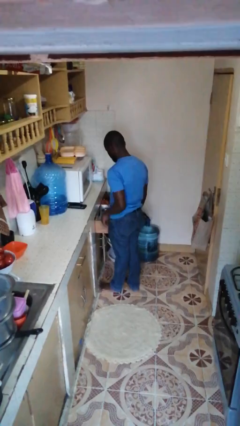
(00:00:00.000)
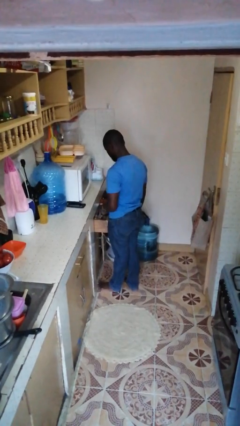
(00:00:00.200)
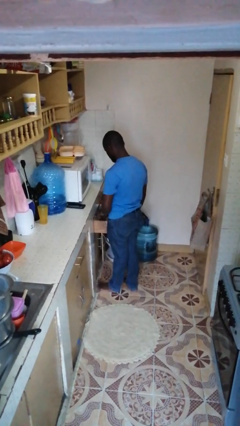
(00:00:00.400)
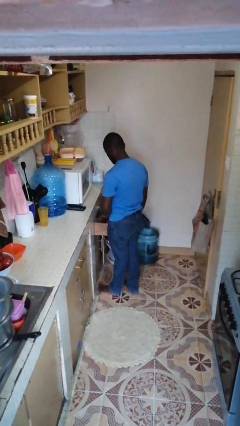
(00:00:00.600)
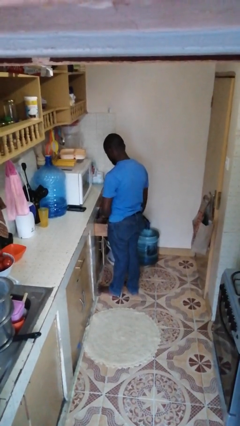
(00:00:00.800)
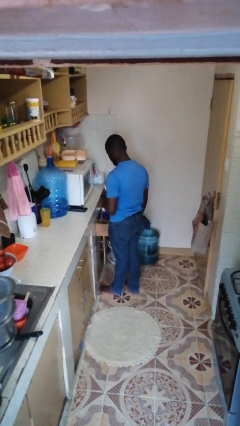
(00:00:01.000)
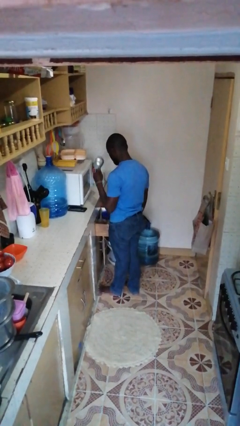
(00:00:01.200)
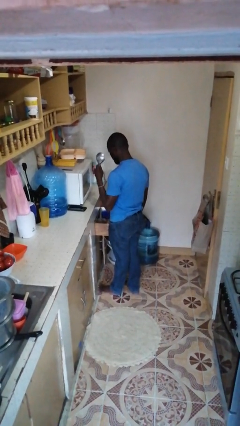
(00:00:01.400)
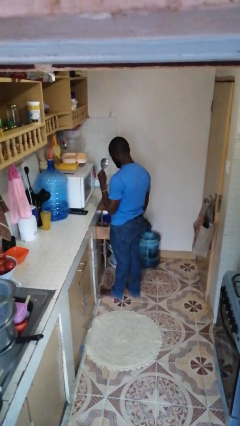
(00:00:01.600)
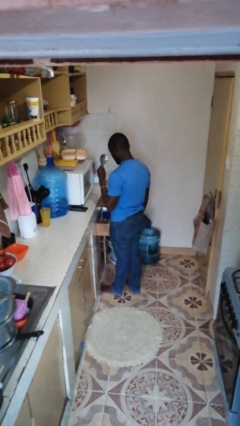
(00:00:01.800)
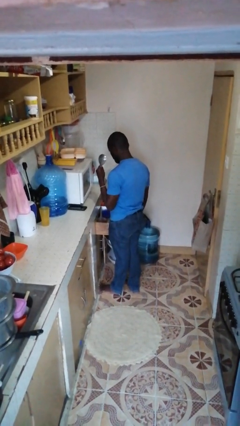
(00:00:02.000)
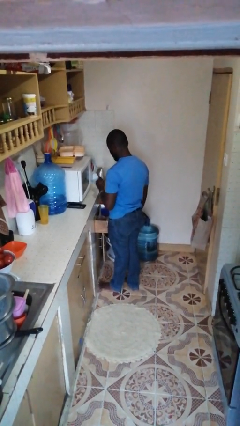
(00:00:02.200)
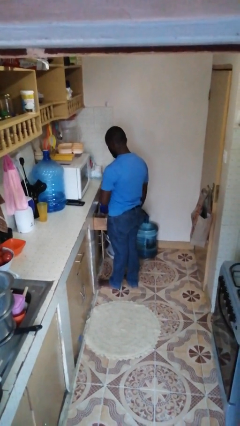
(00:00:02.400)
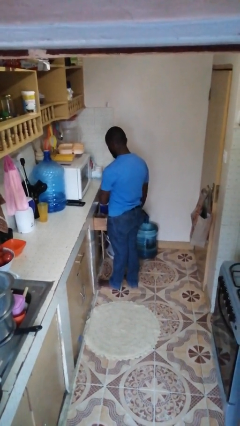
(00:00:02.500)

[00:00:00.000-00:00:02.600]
person takes object from kitchen drawer

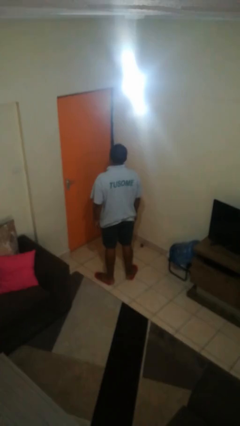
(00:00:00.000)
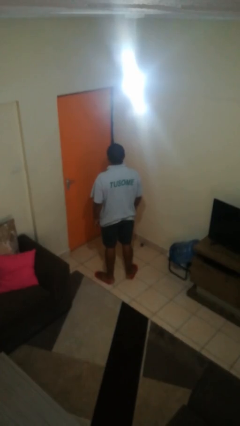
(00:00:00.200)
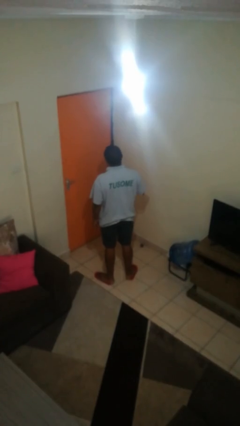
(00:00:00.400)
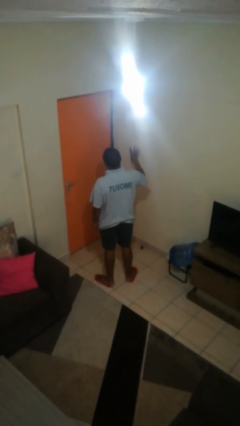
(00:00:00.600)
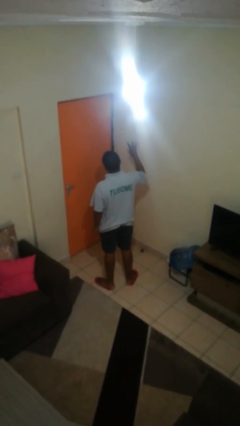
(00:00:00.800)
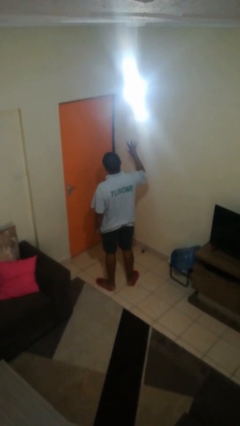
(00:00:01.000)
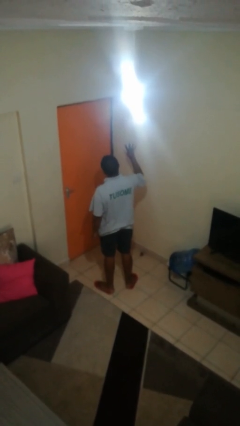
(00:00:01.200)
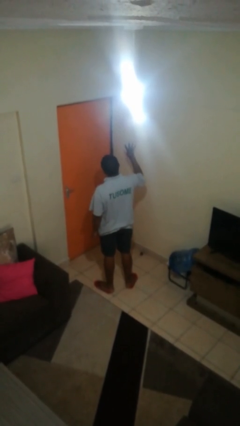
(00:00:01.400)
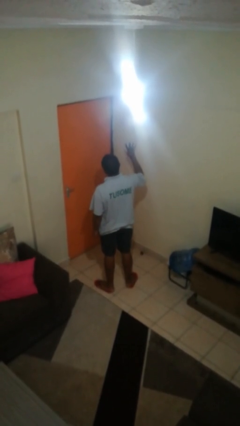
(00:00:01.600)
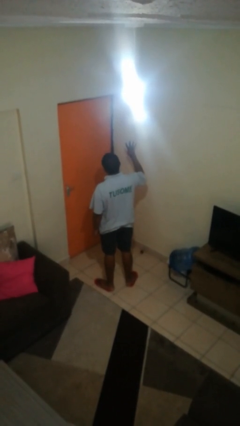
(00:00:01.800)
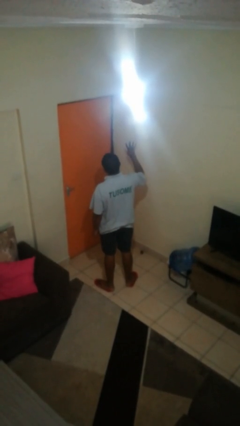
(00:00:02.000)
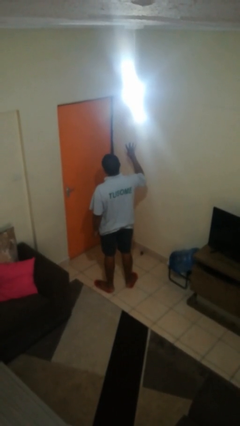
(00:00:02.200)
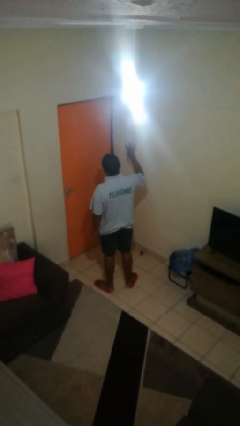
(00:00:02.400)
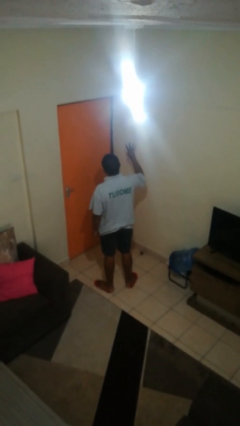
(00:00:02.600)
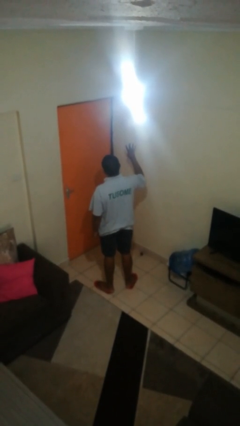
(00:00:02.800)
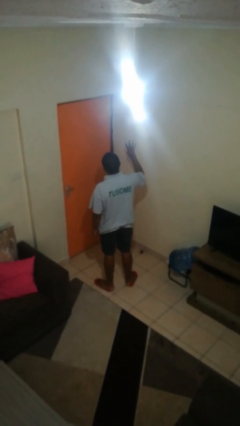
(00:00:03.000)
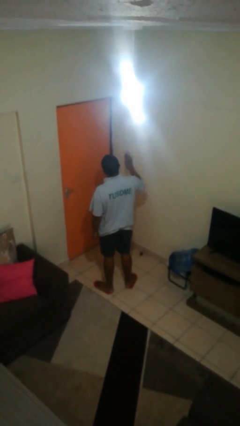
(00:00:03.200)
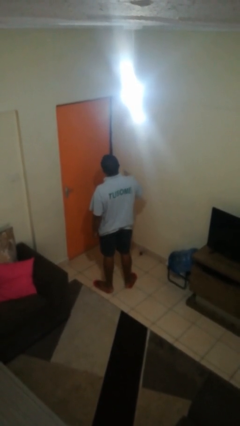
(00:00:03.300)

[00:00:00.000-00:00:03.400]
person gestures number four

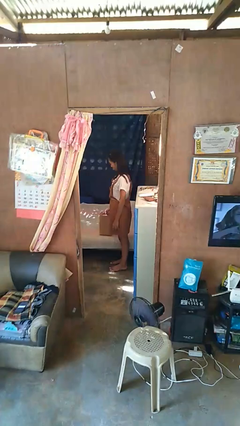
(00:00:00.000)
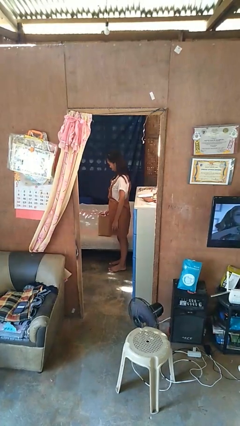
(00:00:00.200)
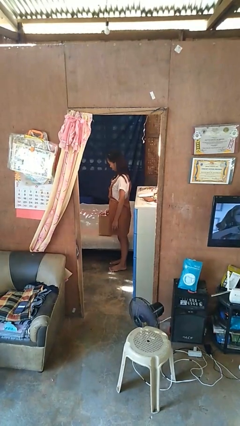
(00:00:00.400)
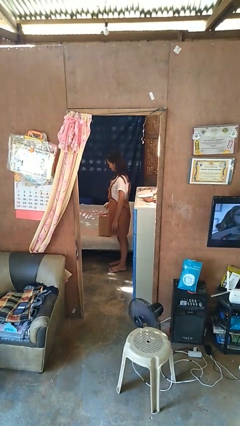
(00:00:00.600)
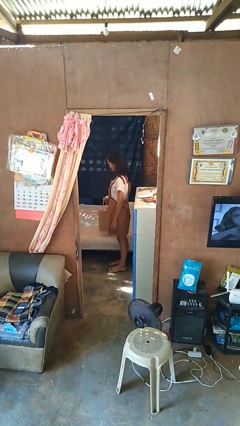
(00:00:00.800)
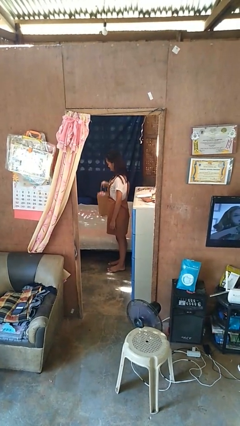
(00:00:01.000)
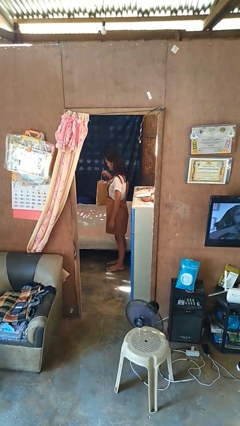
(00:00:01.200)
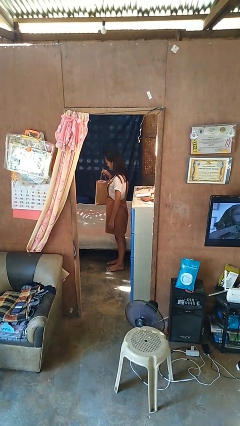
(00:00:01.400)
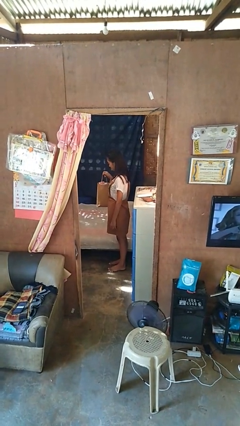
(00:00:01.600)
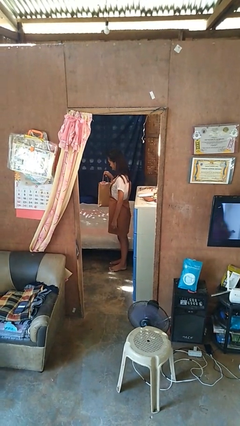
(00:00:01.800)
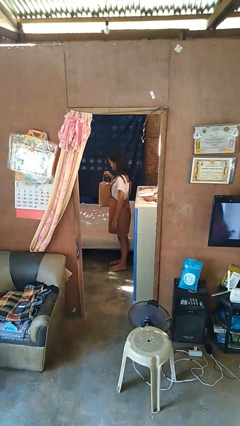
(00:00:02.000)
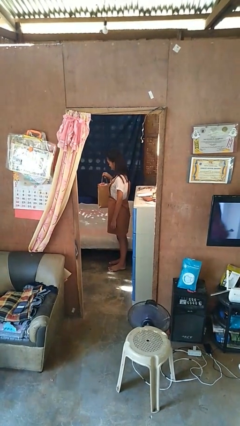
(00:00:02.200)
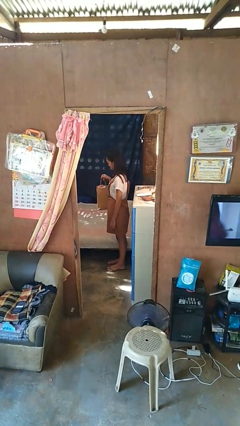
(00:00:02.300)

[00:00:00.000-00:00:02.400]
person picks up object from couch

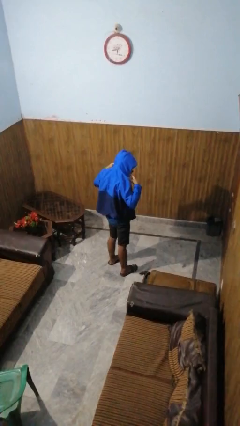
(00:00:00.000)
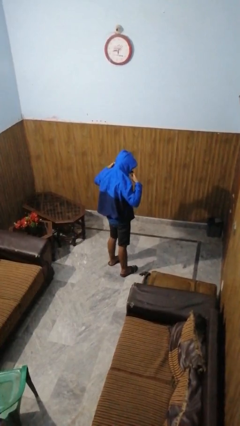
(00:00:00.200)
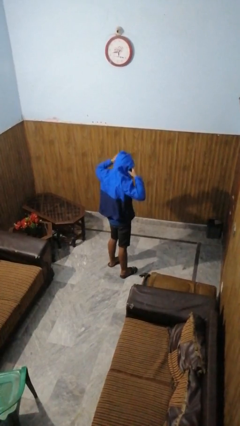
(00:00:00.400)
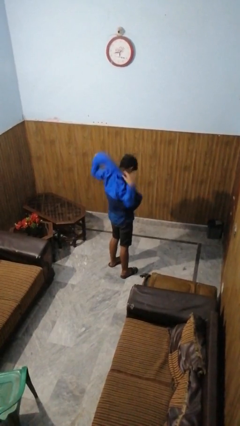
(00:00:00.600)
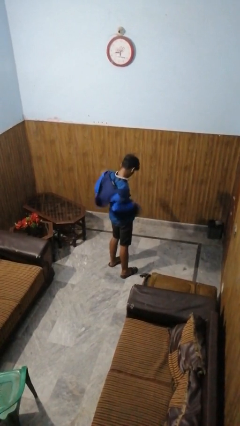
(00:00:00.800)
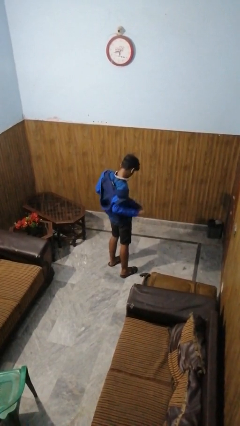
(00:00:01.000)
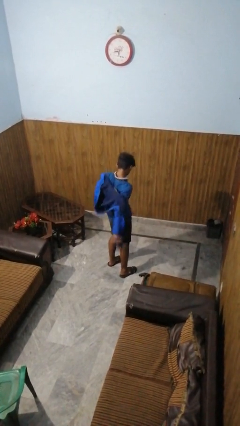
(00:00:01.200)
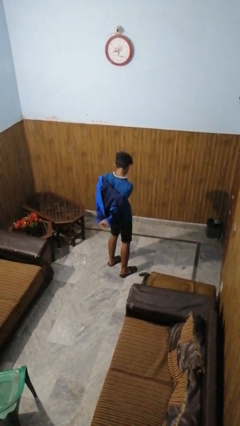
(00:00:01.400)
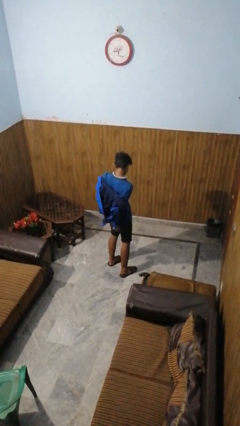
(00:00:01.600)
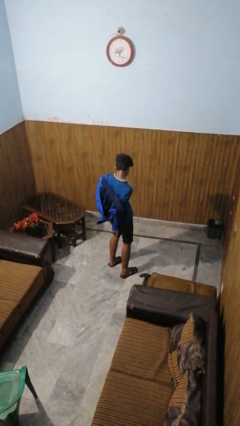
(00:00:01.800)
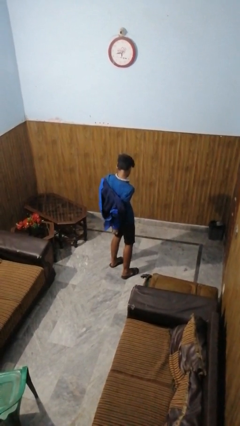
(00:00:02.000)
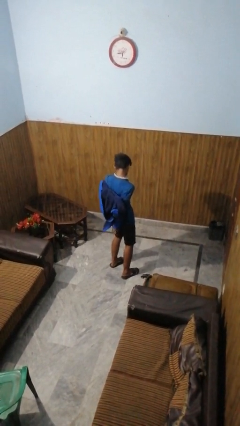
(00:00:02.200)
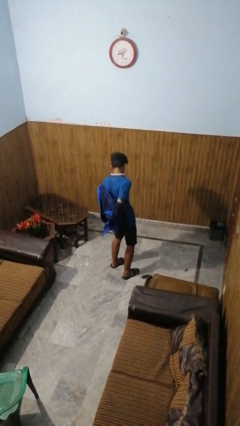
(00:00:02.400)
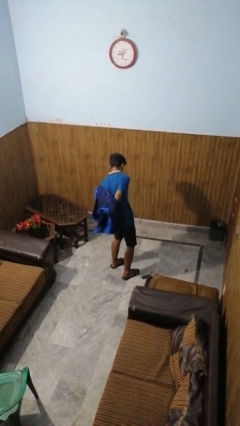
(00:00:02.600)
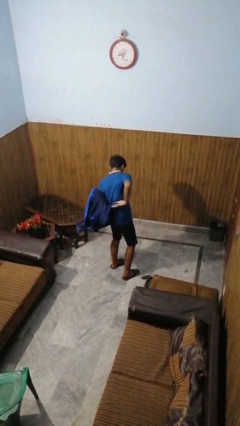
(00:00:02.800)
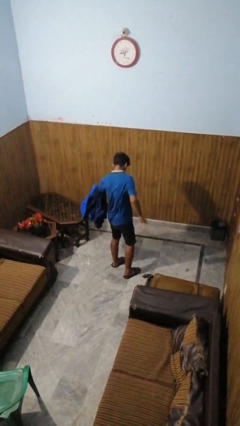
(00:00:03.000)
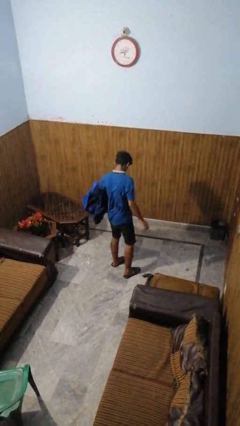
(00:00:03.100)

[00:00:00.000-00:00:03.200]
person takes off hoodie

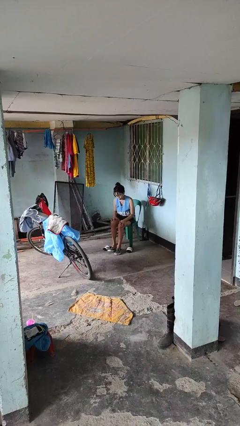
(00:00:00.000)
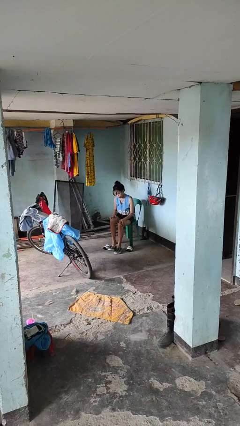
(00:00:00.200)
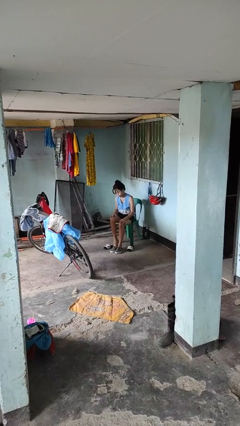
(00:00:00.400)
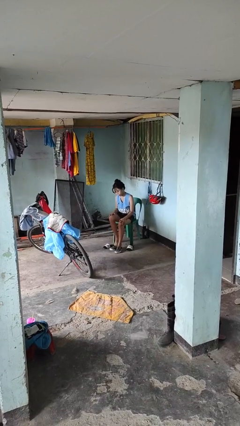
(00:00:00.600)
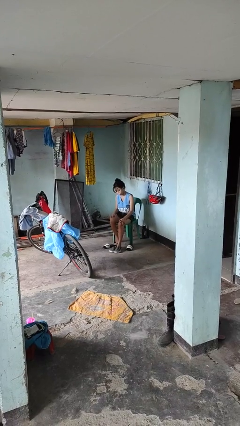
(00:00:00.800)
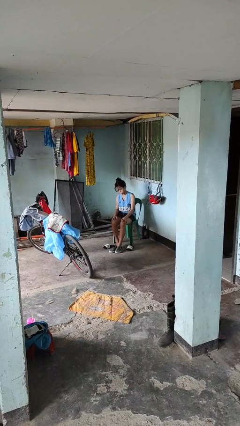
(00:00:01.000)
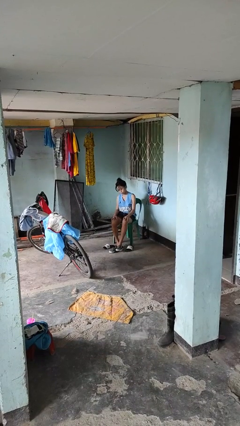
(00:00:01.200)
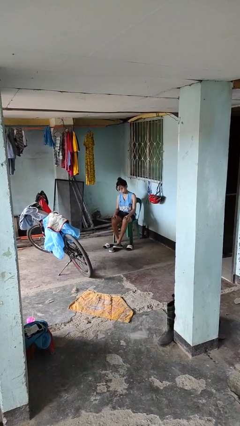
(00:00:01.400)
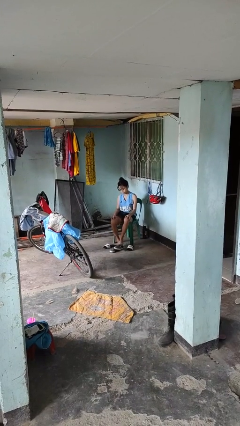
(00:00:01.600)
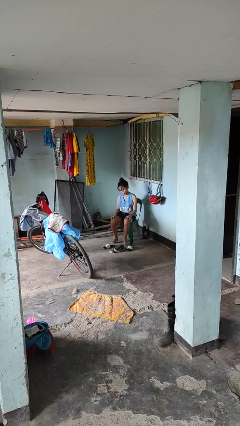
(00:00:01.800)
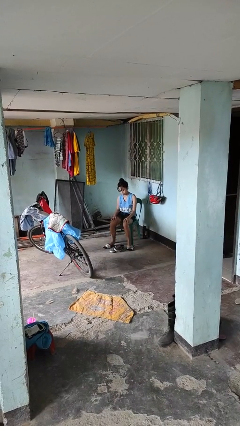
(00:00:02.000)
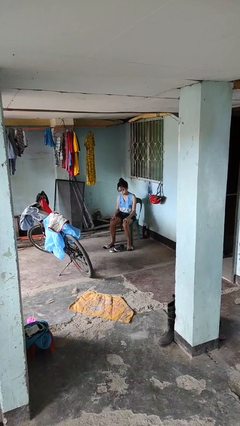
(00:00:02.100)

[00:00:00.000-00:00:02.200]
person takes off shoes

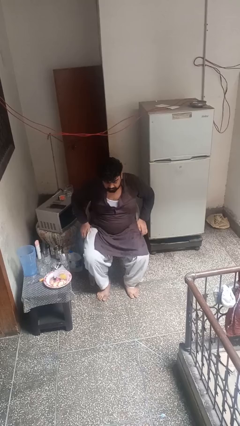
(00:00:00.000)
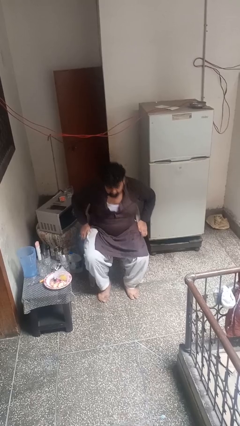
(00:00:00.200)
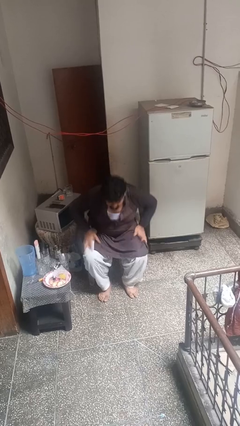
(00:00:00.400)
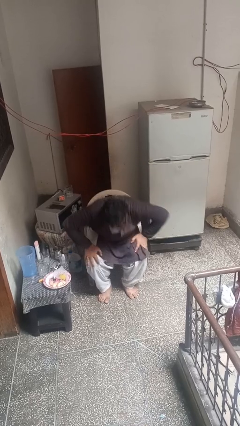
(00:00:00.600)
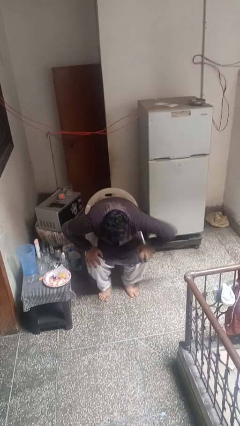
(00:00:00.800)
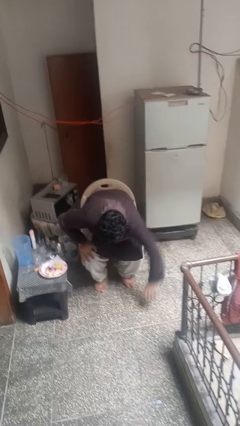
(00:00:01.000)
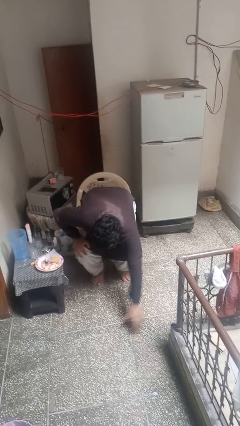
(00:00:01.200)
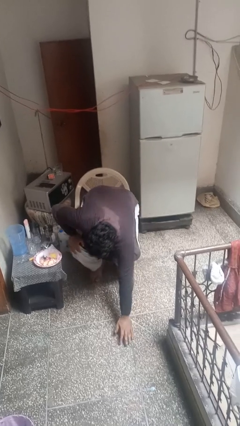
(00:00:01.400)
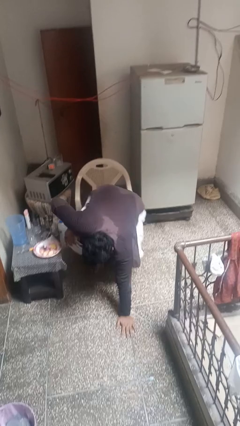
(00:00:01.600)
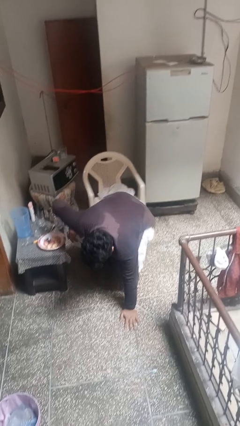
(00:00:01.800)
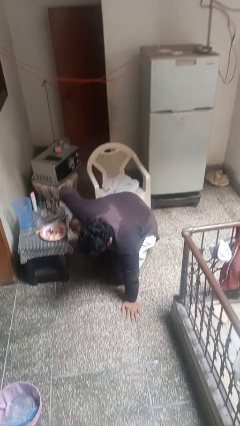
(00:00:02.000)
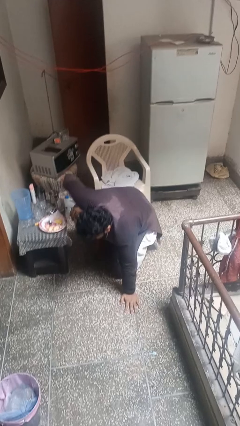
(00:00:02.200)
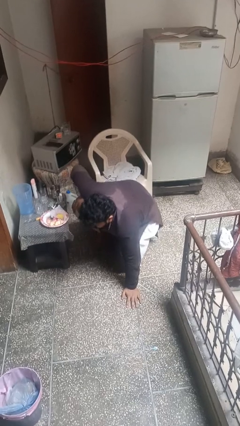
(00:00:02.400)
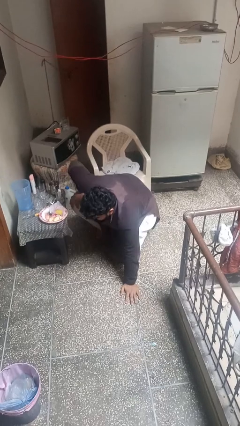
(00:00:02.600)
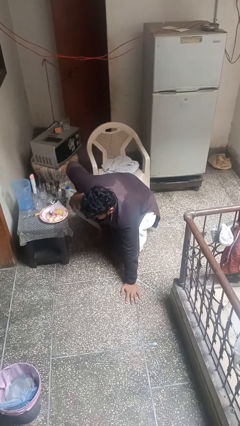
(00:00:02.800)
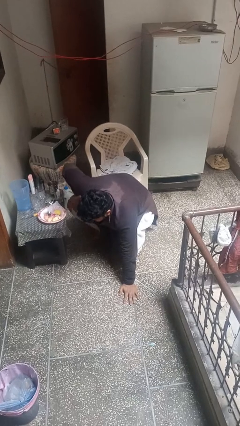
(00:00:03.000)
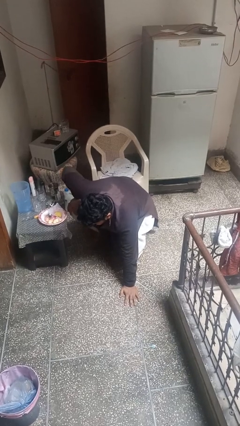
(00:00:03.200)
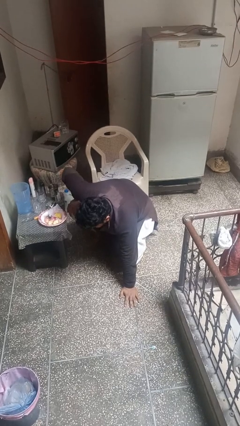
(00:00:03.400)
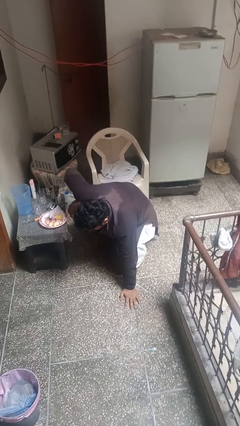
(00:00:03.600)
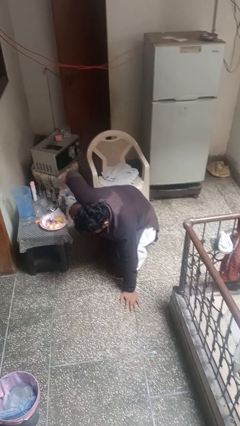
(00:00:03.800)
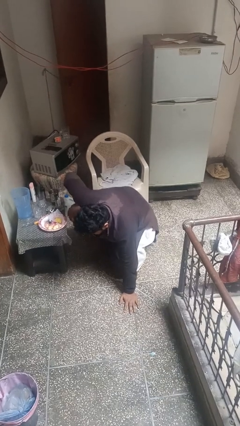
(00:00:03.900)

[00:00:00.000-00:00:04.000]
person falls from chair
